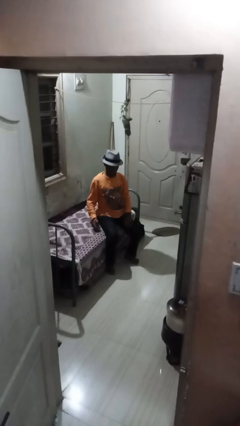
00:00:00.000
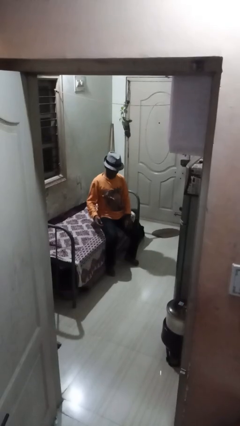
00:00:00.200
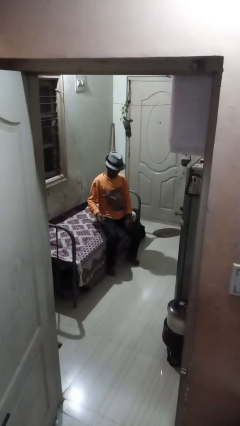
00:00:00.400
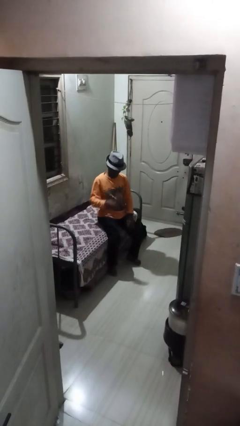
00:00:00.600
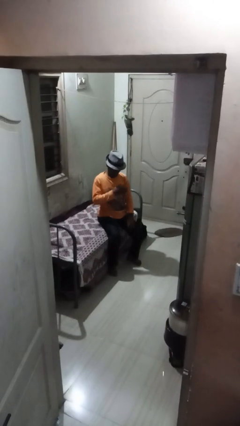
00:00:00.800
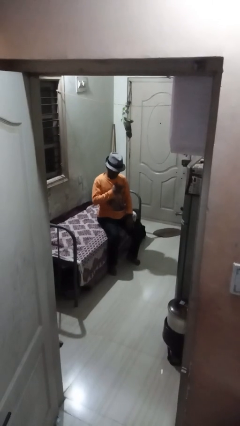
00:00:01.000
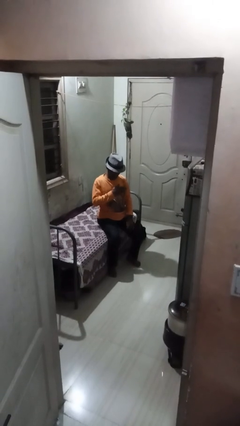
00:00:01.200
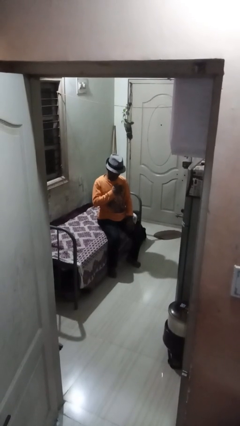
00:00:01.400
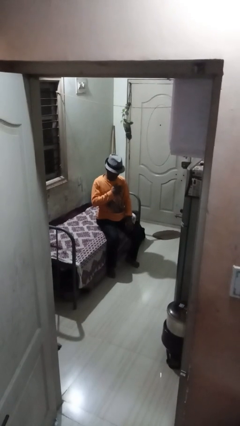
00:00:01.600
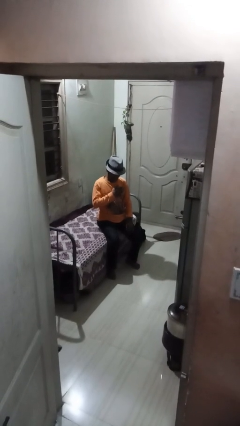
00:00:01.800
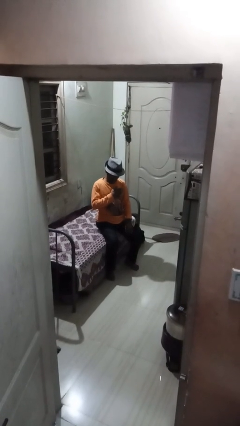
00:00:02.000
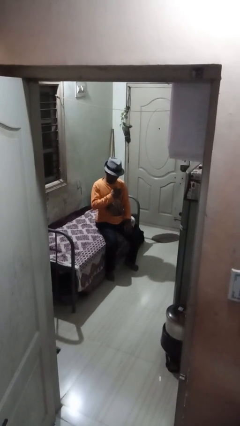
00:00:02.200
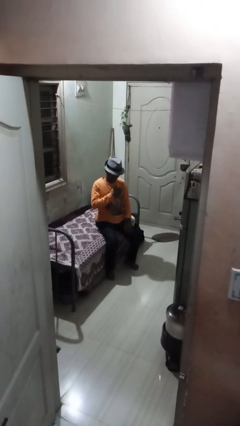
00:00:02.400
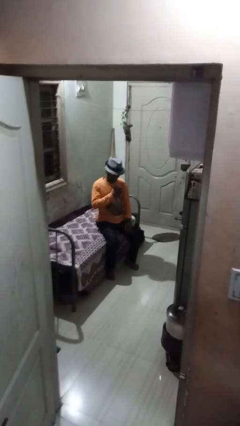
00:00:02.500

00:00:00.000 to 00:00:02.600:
person drums on chest

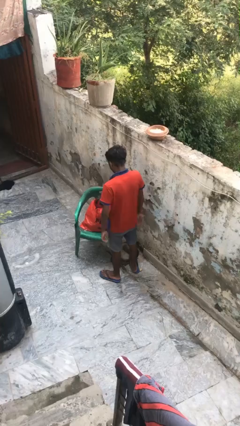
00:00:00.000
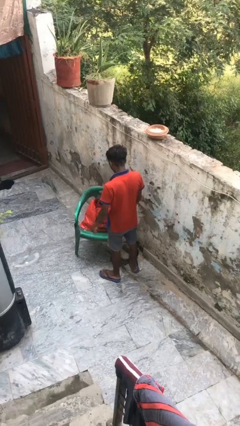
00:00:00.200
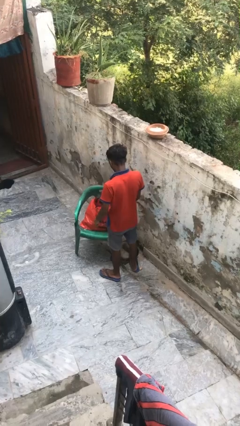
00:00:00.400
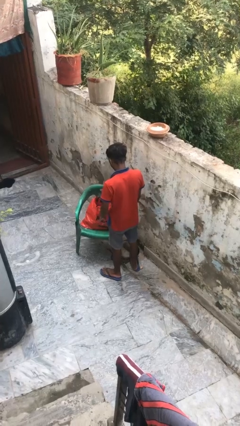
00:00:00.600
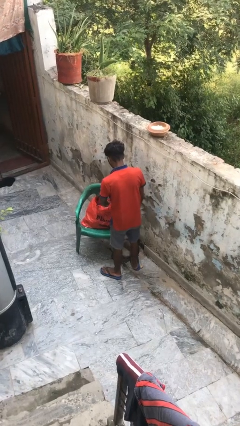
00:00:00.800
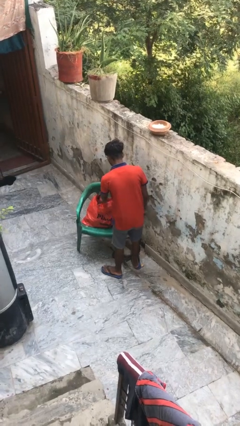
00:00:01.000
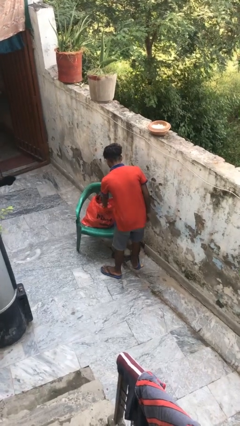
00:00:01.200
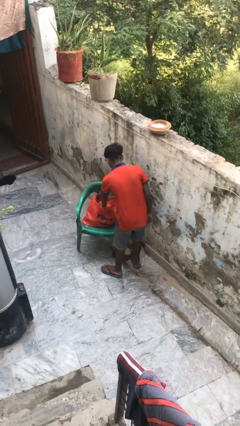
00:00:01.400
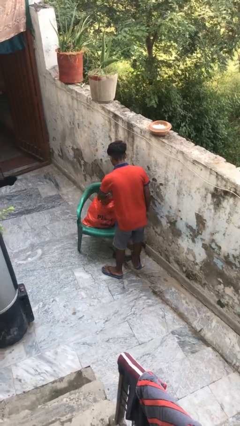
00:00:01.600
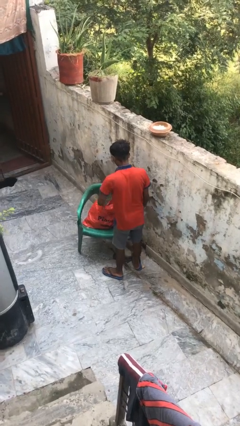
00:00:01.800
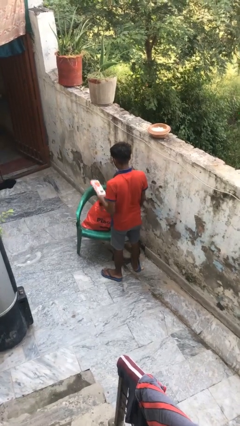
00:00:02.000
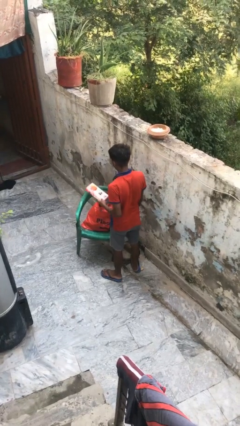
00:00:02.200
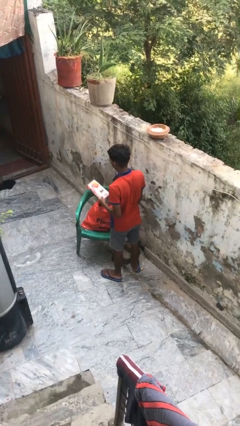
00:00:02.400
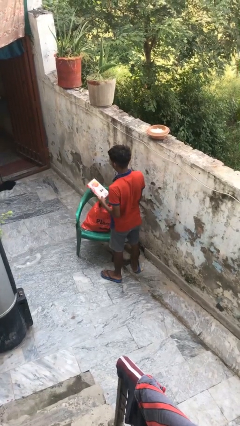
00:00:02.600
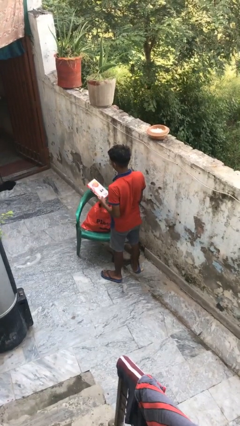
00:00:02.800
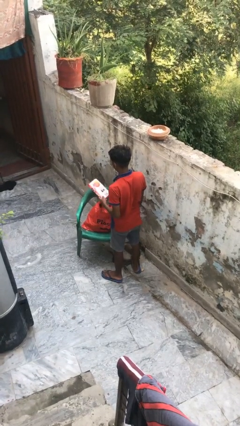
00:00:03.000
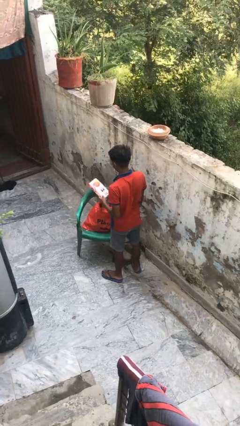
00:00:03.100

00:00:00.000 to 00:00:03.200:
person takes object from bag

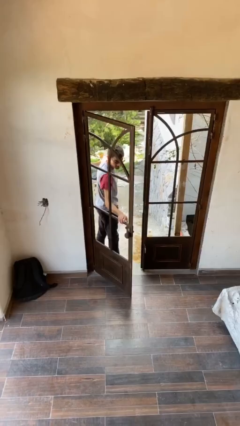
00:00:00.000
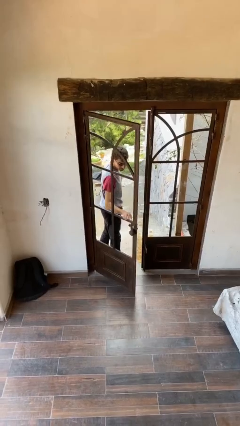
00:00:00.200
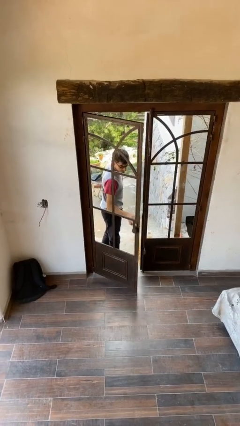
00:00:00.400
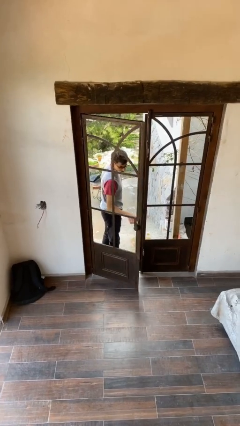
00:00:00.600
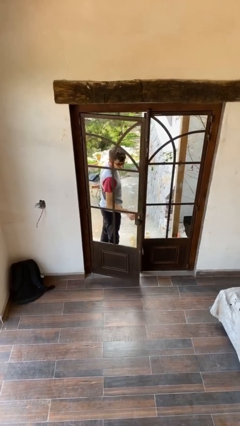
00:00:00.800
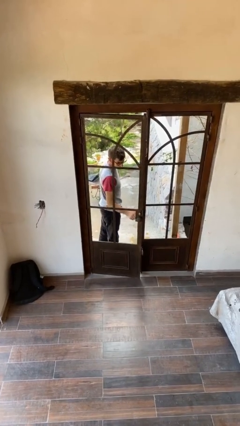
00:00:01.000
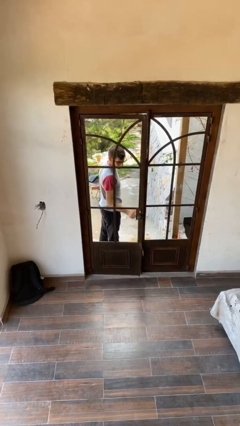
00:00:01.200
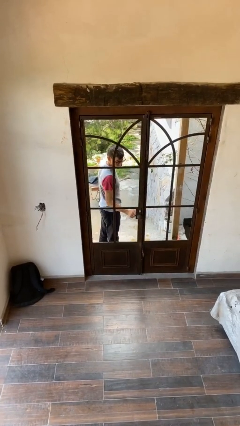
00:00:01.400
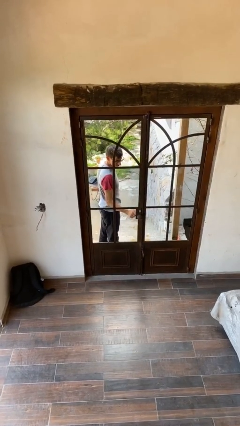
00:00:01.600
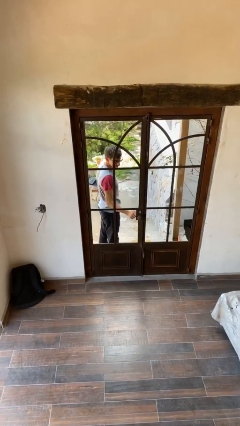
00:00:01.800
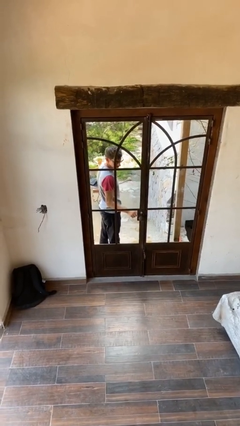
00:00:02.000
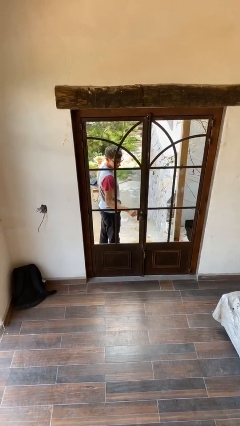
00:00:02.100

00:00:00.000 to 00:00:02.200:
person closes facility door

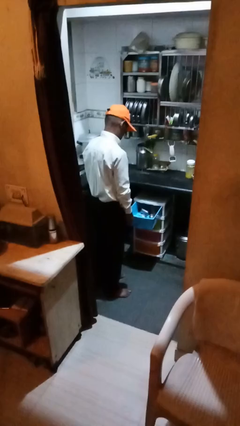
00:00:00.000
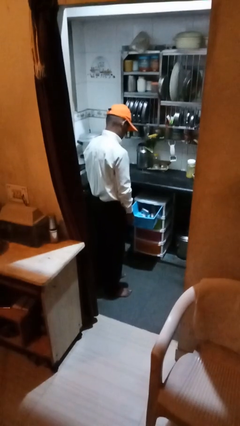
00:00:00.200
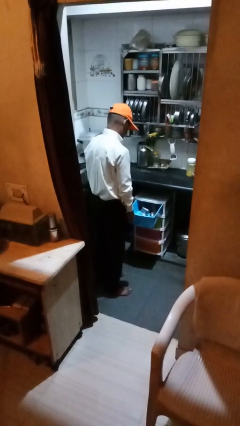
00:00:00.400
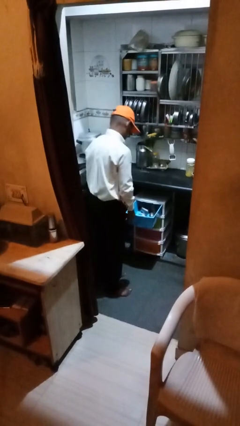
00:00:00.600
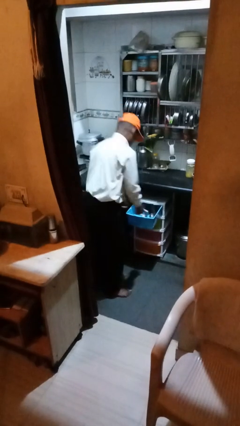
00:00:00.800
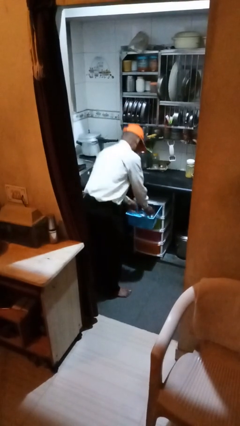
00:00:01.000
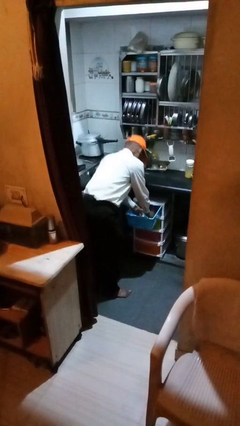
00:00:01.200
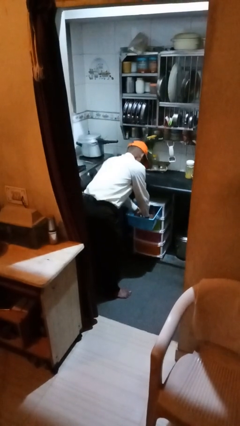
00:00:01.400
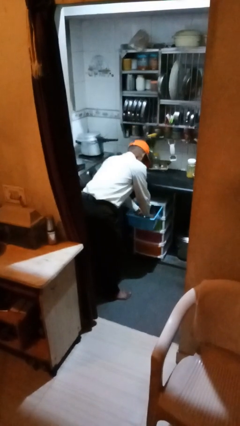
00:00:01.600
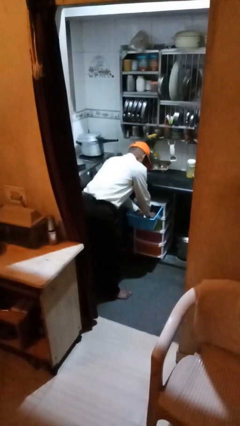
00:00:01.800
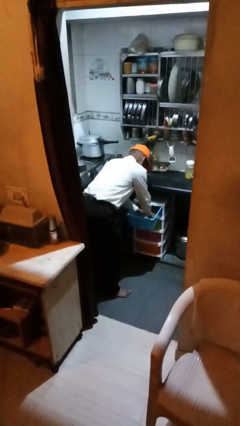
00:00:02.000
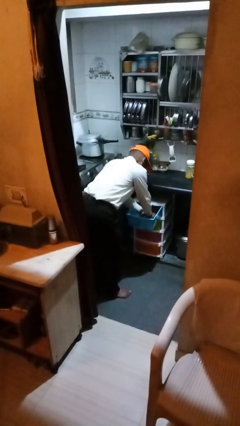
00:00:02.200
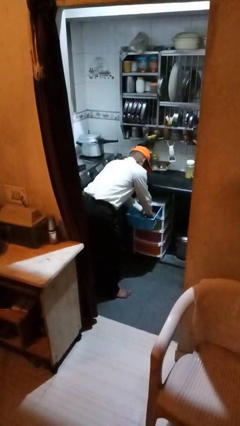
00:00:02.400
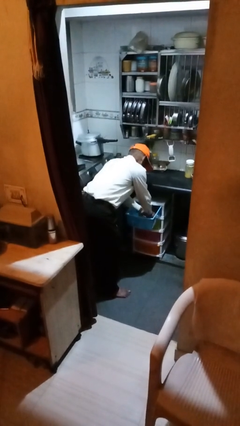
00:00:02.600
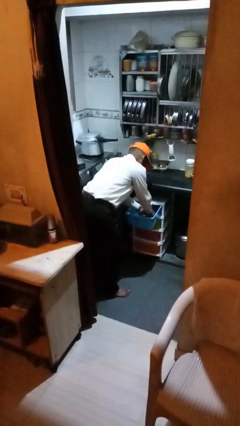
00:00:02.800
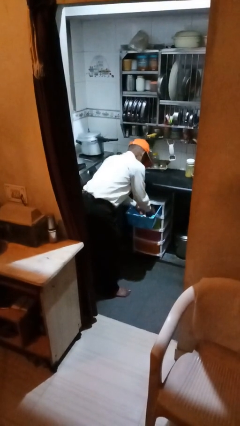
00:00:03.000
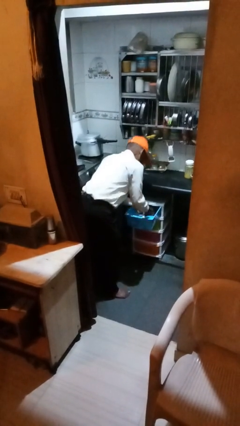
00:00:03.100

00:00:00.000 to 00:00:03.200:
person takes object from kitchen drawer

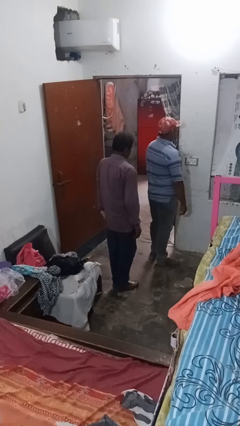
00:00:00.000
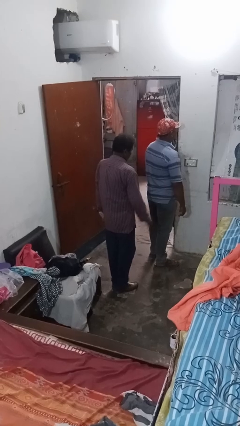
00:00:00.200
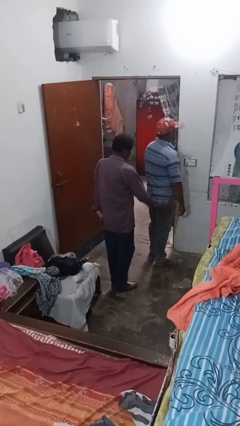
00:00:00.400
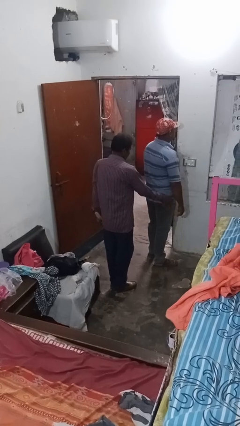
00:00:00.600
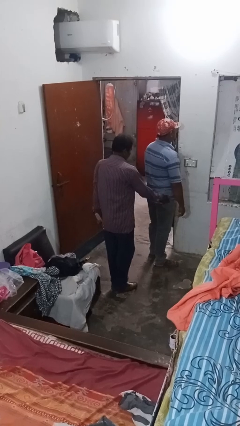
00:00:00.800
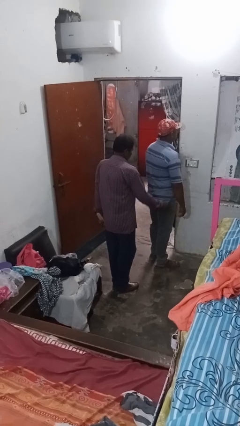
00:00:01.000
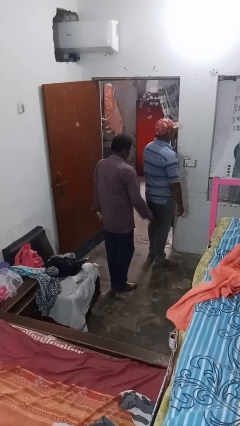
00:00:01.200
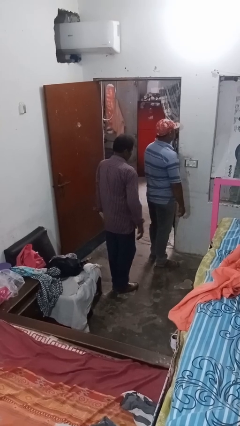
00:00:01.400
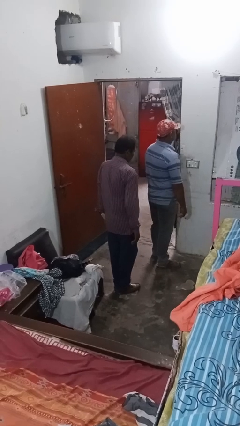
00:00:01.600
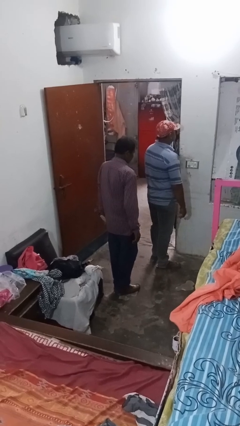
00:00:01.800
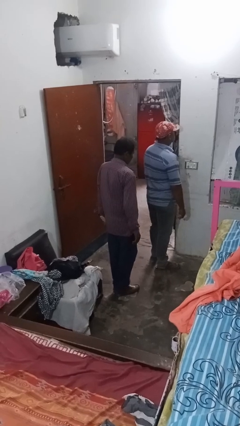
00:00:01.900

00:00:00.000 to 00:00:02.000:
person bumps into person

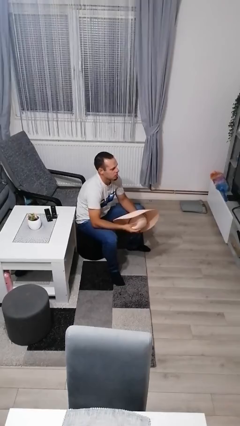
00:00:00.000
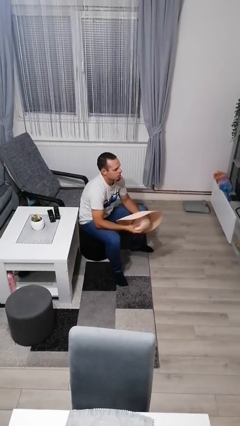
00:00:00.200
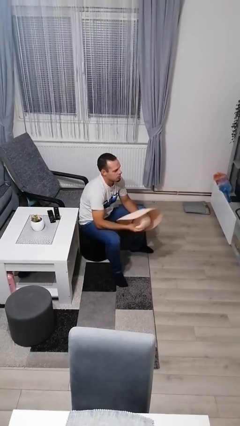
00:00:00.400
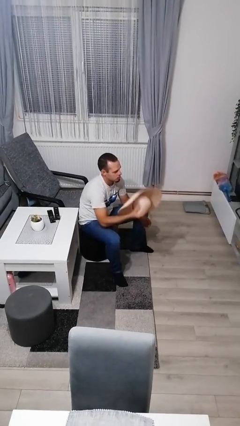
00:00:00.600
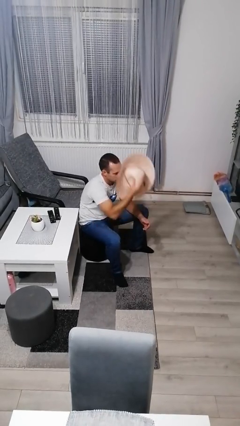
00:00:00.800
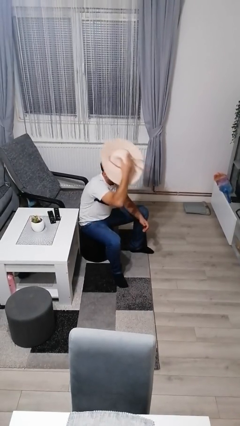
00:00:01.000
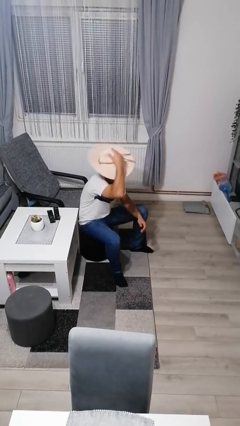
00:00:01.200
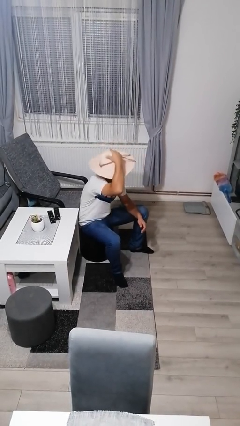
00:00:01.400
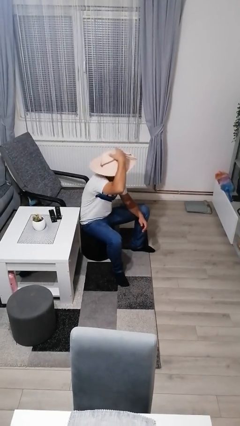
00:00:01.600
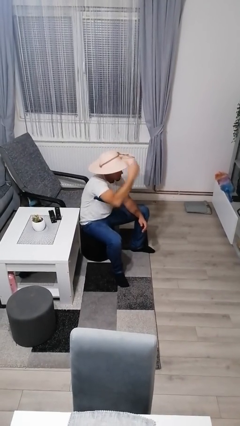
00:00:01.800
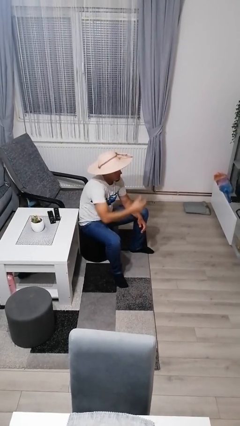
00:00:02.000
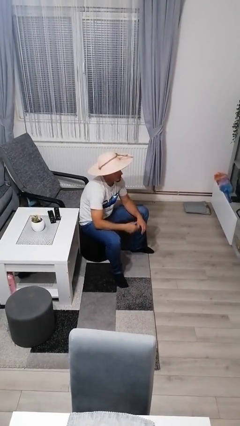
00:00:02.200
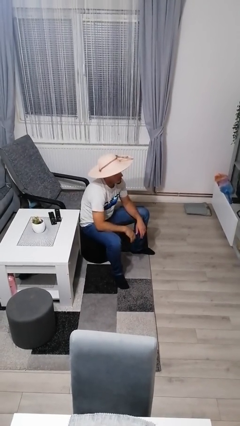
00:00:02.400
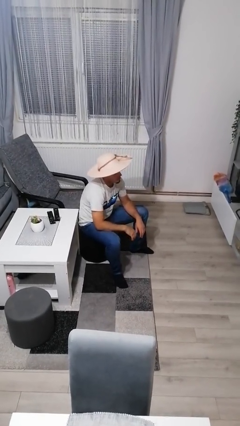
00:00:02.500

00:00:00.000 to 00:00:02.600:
person puts on hat

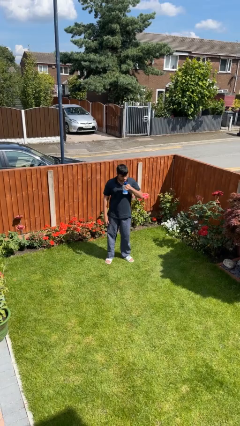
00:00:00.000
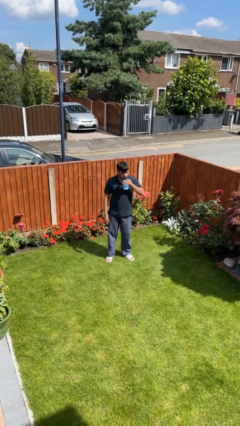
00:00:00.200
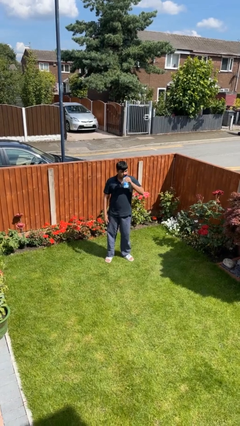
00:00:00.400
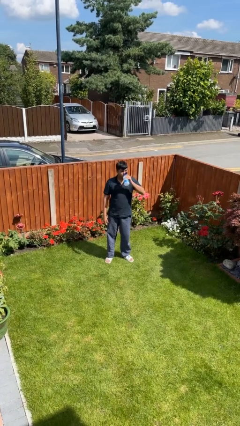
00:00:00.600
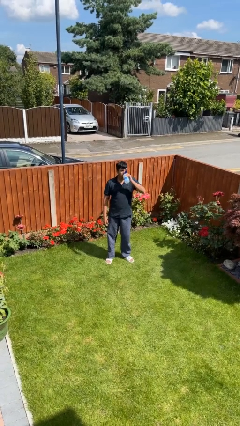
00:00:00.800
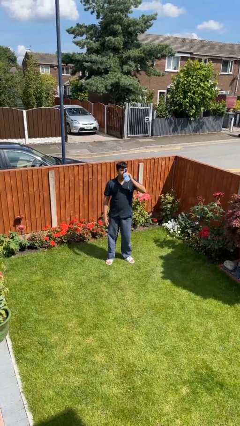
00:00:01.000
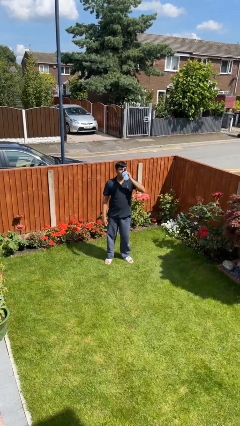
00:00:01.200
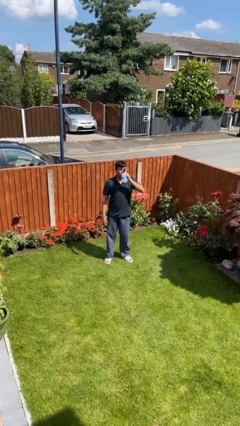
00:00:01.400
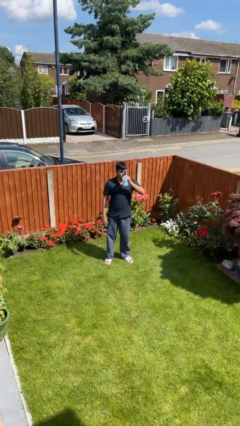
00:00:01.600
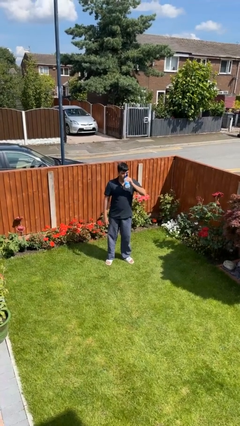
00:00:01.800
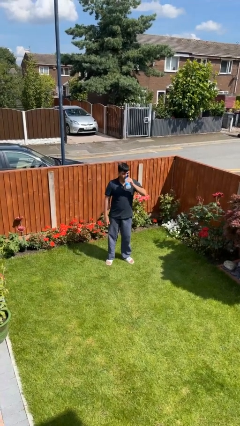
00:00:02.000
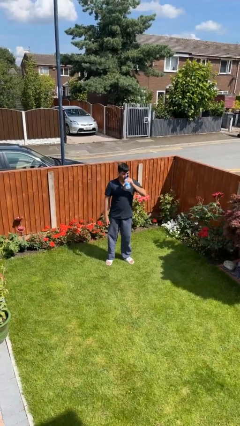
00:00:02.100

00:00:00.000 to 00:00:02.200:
person drinks from bottle
